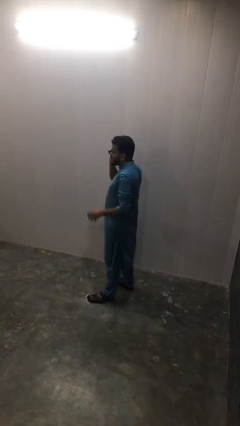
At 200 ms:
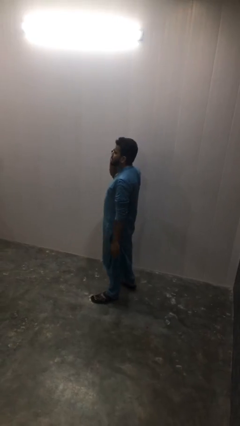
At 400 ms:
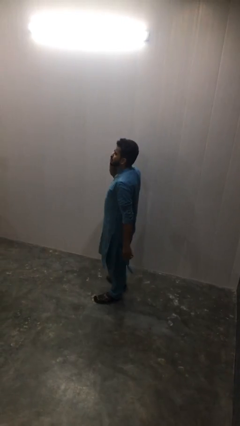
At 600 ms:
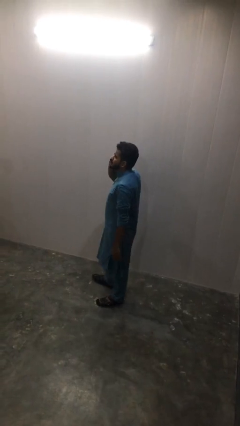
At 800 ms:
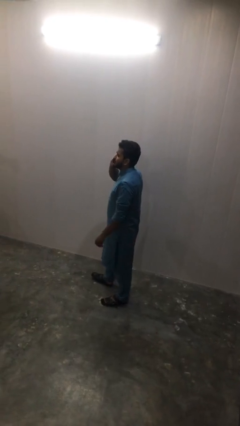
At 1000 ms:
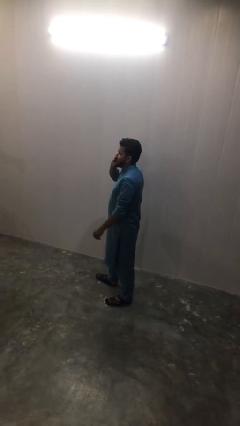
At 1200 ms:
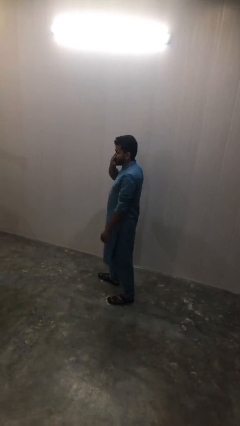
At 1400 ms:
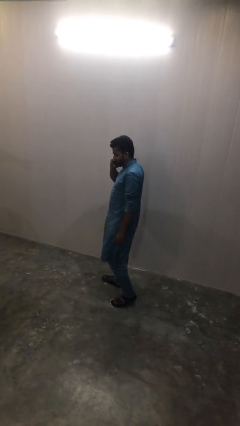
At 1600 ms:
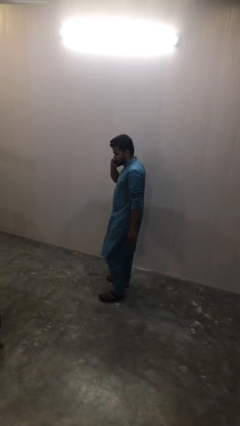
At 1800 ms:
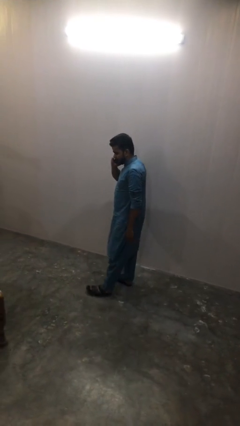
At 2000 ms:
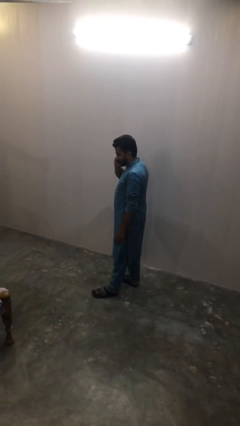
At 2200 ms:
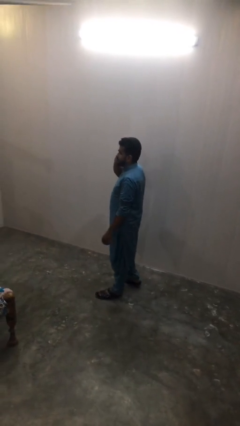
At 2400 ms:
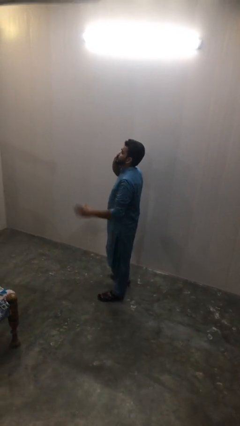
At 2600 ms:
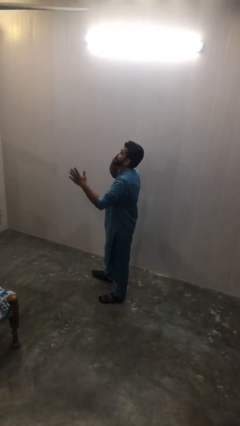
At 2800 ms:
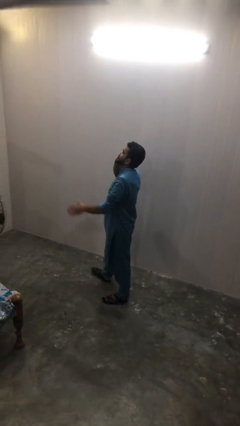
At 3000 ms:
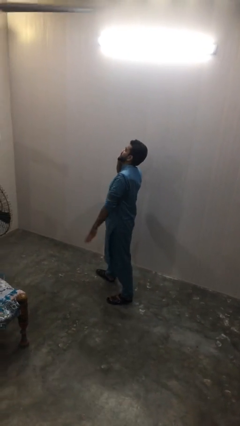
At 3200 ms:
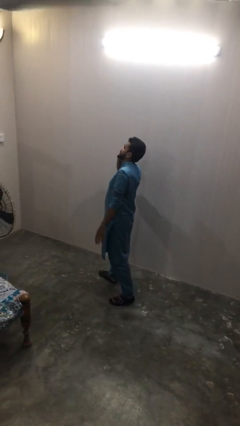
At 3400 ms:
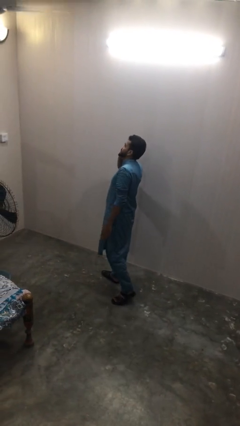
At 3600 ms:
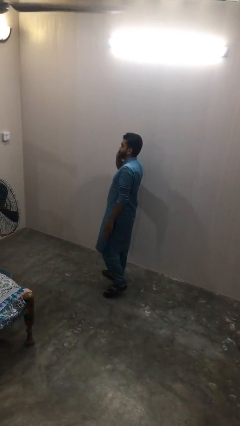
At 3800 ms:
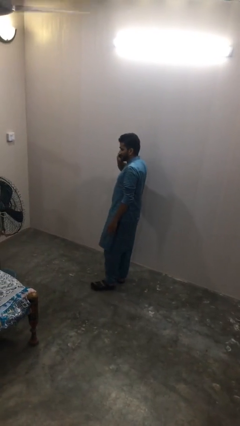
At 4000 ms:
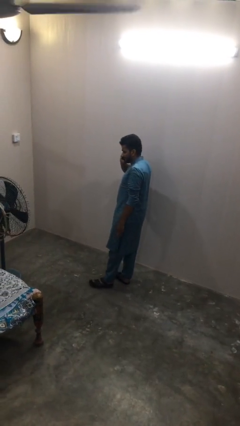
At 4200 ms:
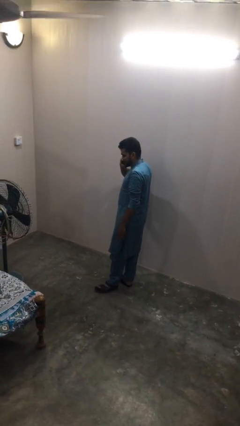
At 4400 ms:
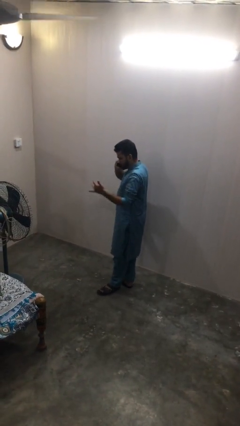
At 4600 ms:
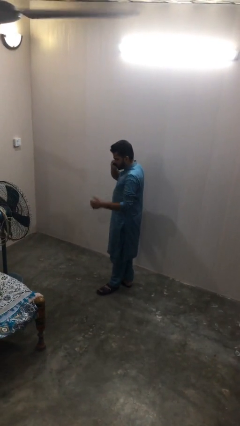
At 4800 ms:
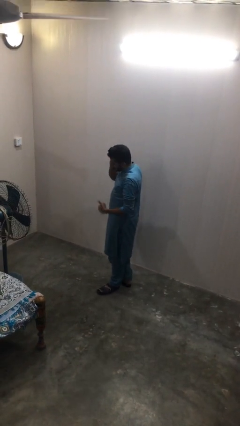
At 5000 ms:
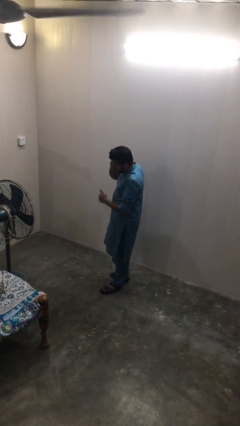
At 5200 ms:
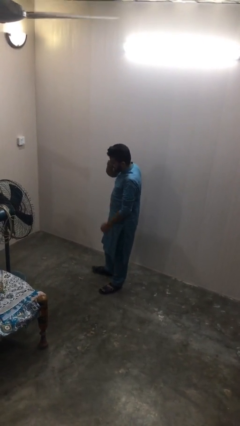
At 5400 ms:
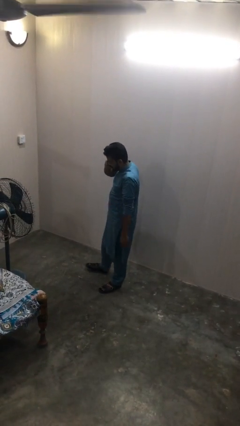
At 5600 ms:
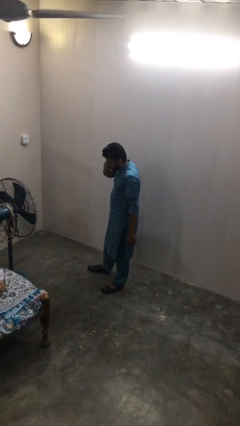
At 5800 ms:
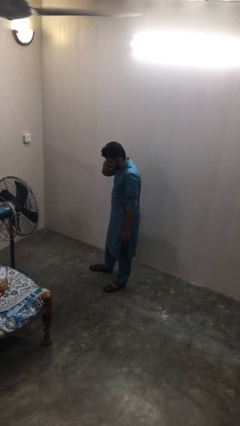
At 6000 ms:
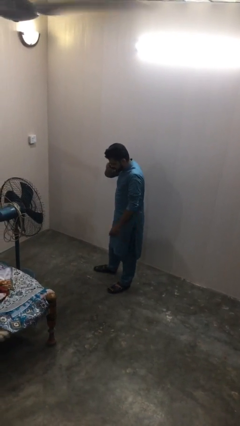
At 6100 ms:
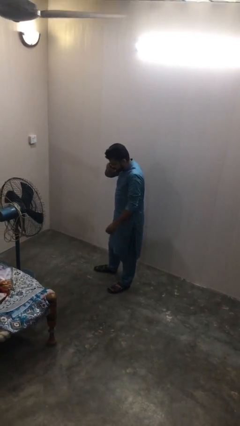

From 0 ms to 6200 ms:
person talks on phone

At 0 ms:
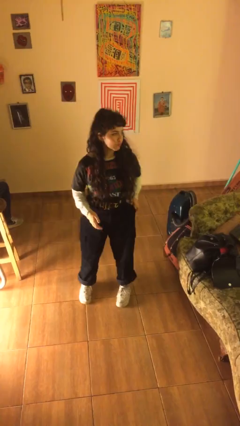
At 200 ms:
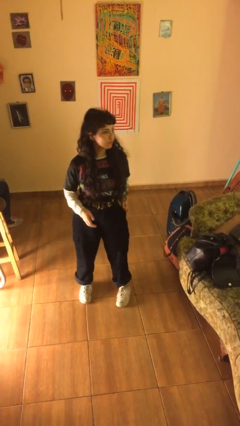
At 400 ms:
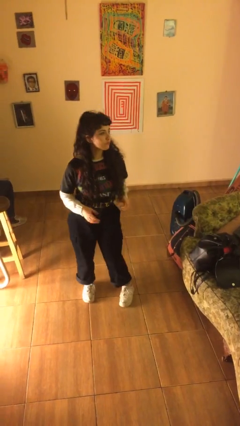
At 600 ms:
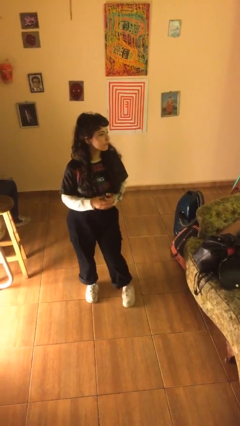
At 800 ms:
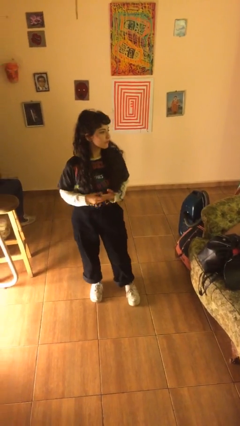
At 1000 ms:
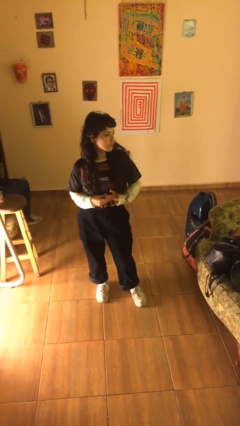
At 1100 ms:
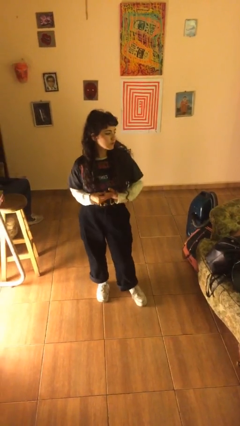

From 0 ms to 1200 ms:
person puts phone into pocket

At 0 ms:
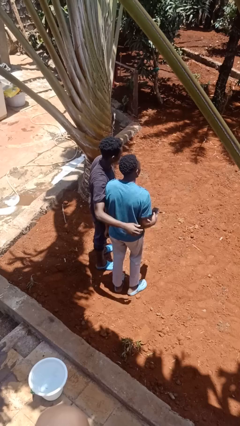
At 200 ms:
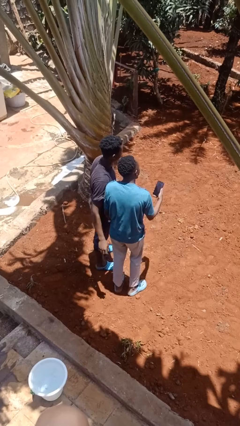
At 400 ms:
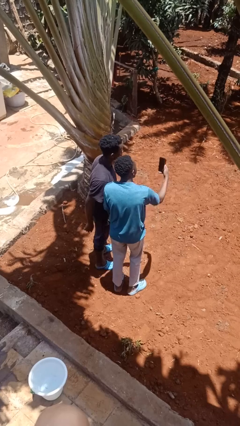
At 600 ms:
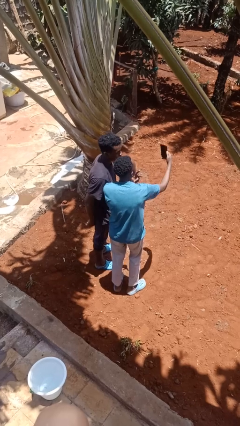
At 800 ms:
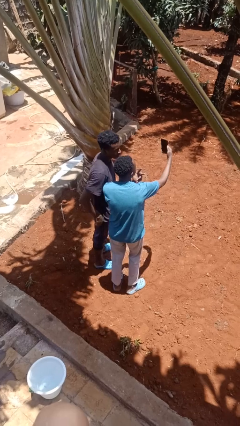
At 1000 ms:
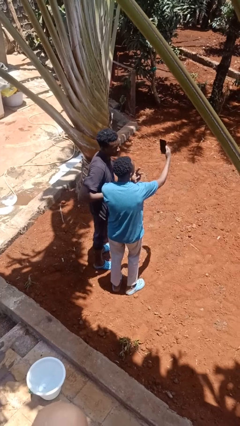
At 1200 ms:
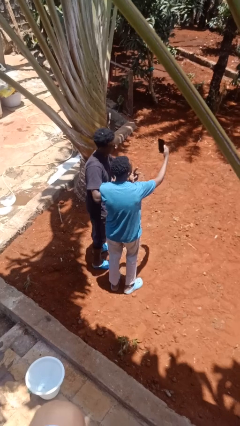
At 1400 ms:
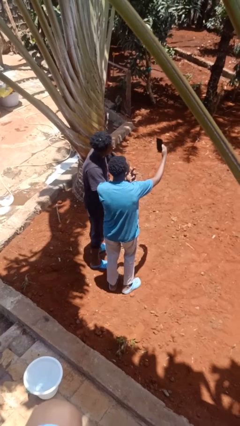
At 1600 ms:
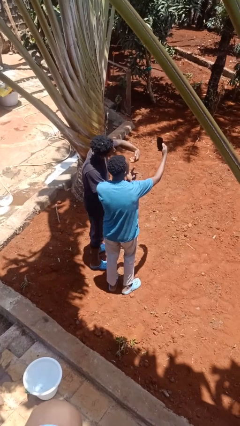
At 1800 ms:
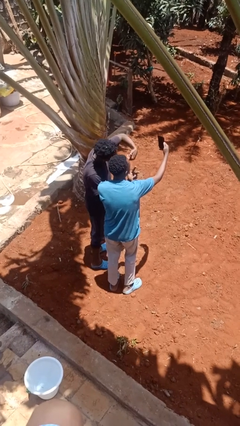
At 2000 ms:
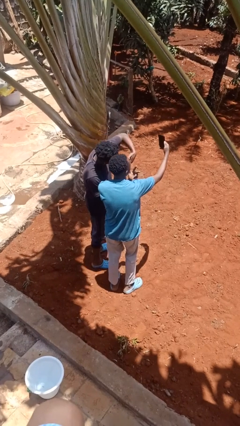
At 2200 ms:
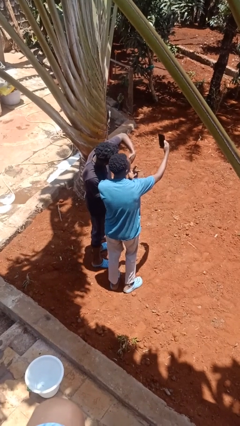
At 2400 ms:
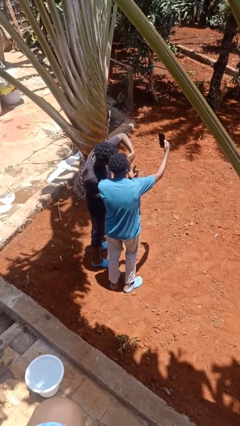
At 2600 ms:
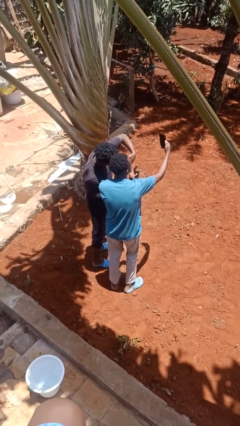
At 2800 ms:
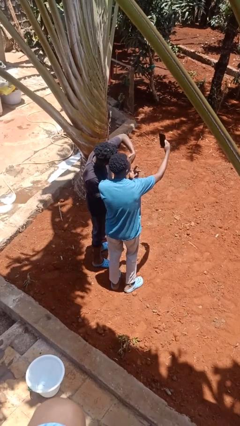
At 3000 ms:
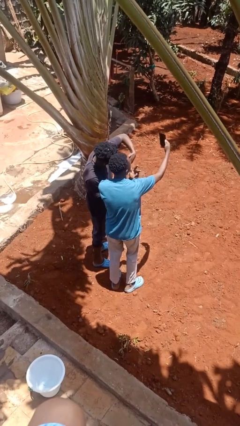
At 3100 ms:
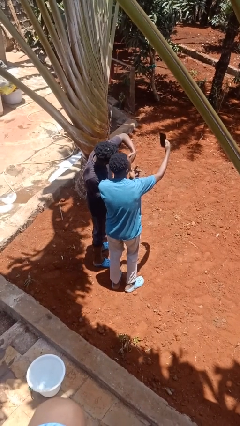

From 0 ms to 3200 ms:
person takes selfie with person

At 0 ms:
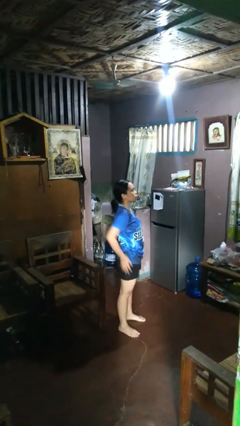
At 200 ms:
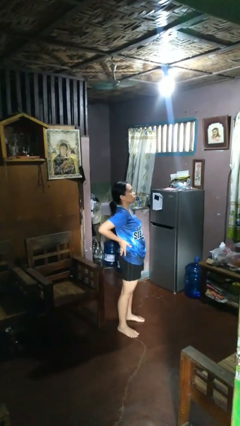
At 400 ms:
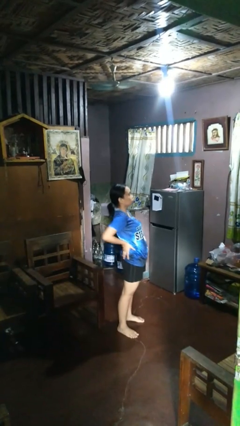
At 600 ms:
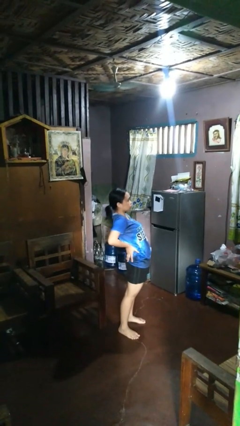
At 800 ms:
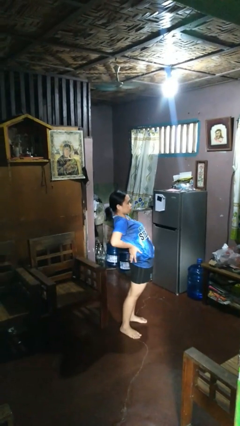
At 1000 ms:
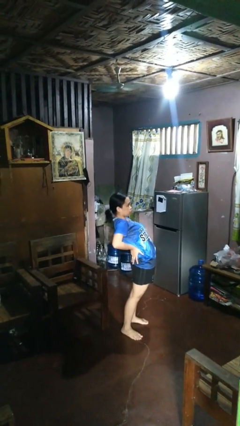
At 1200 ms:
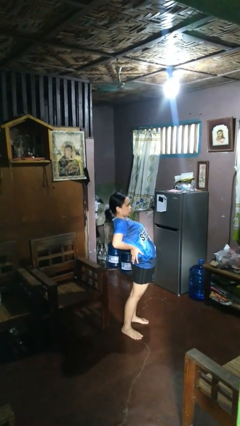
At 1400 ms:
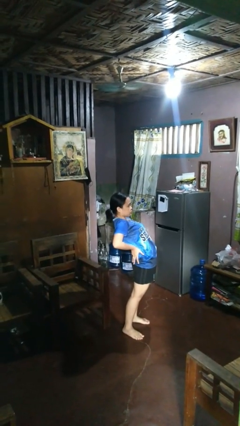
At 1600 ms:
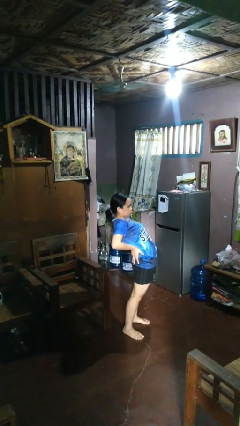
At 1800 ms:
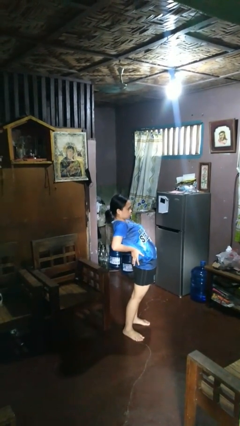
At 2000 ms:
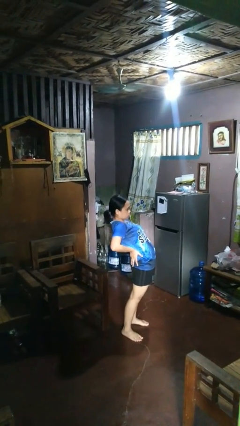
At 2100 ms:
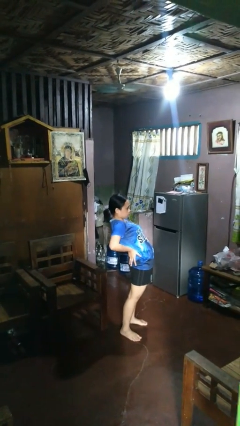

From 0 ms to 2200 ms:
person stretches back

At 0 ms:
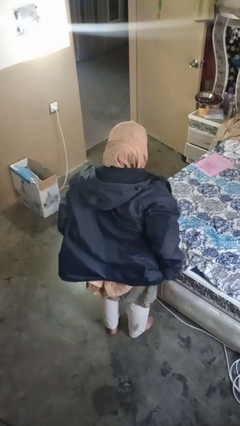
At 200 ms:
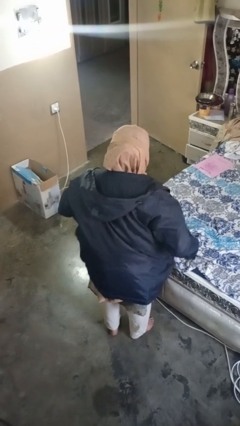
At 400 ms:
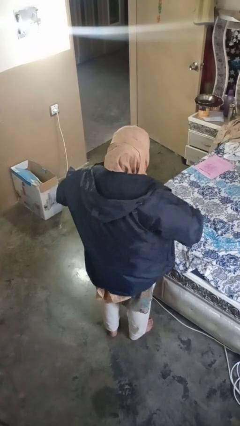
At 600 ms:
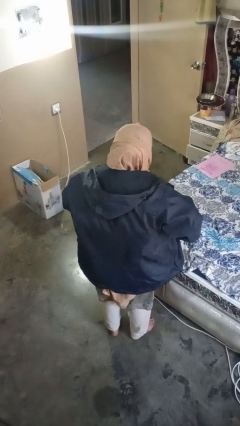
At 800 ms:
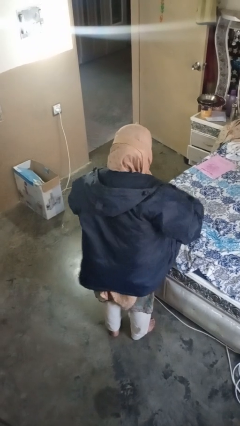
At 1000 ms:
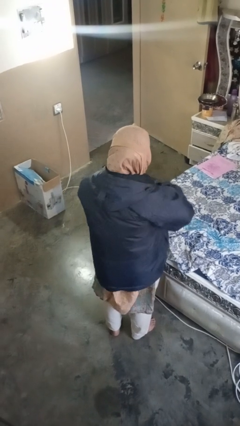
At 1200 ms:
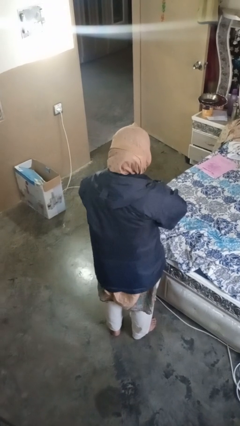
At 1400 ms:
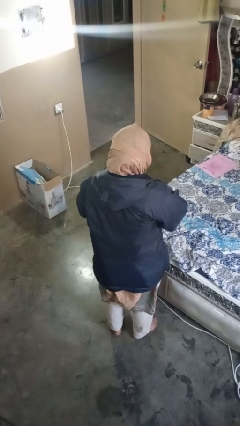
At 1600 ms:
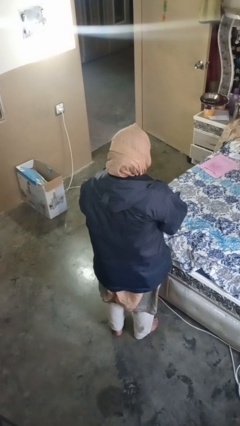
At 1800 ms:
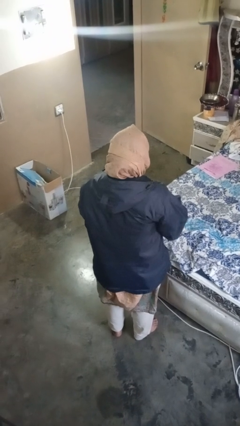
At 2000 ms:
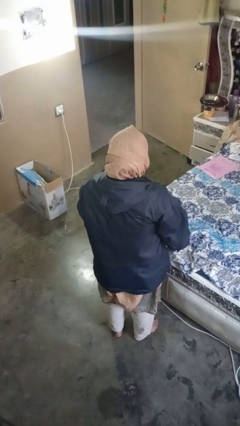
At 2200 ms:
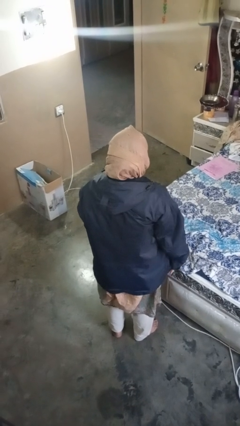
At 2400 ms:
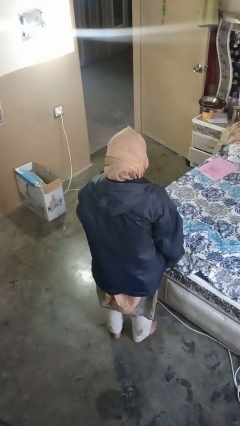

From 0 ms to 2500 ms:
person zips up jacket

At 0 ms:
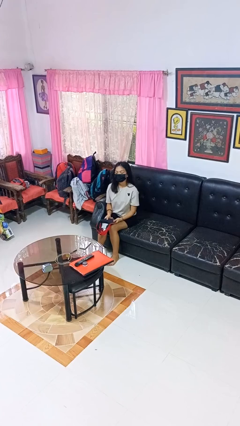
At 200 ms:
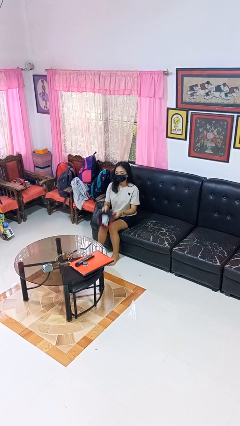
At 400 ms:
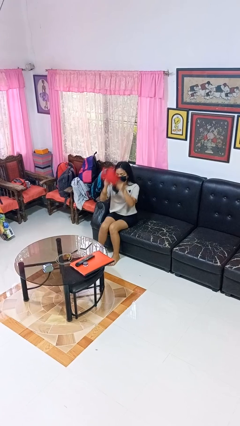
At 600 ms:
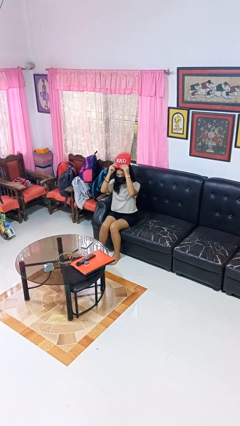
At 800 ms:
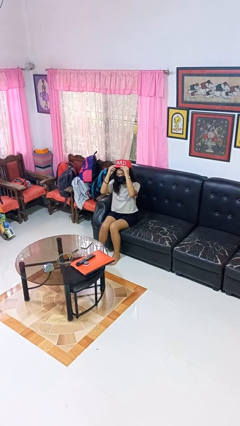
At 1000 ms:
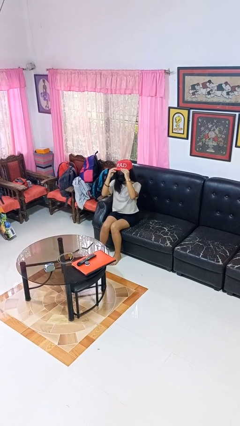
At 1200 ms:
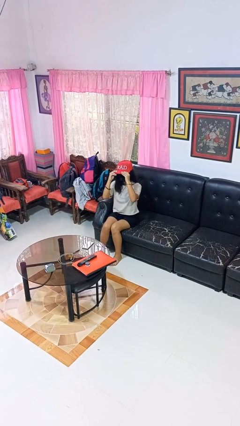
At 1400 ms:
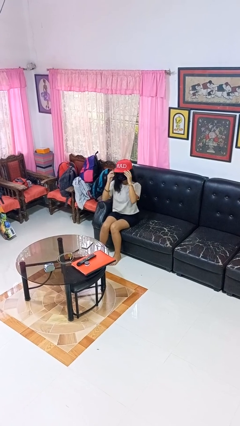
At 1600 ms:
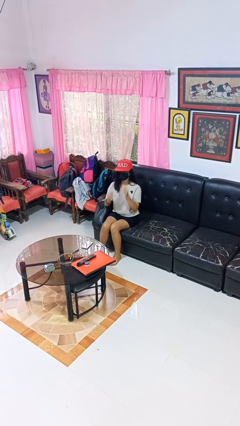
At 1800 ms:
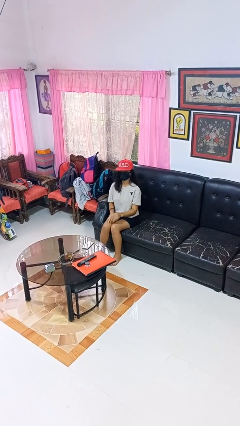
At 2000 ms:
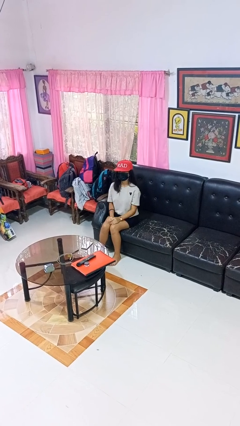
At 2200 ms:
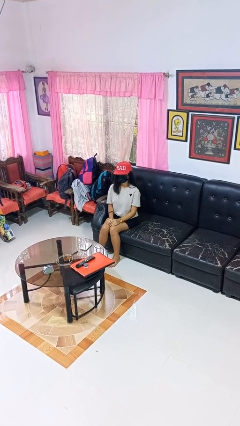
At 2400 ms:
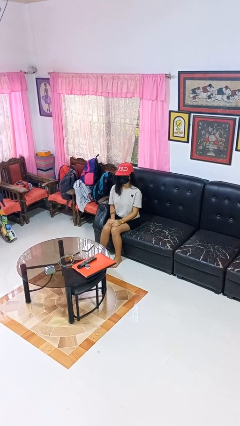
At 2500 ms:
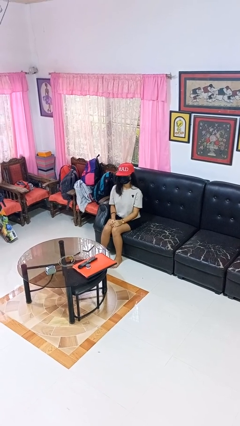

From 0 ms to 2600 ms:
person puts on hat
